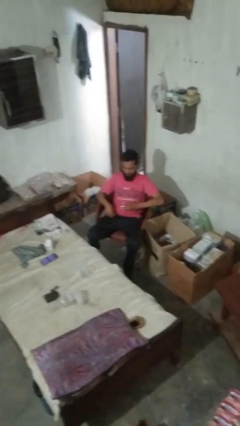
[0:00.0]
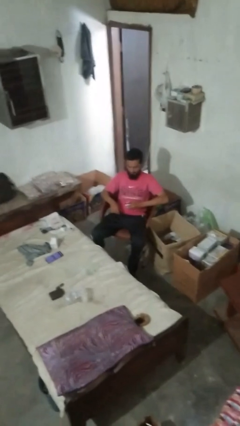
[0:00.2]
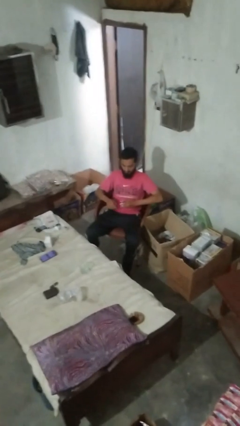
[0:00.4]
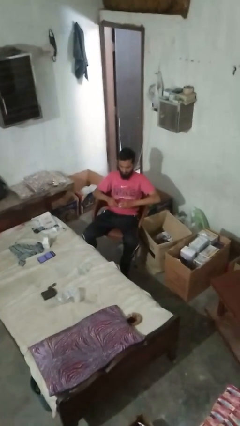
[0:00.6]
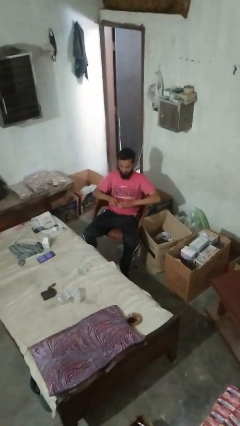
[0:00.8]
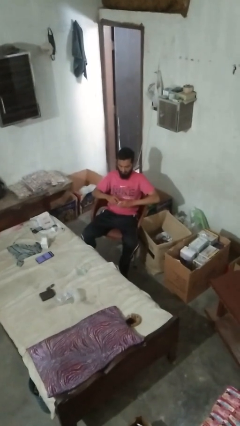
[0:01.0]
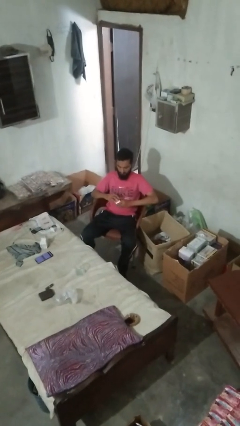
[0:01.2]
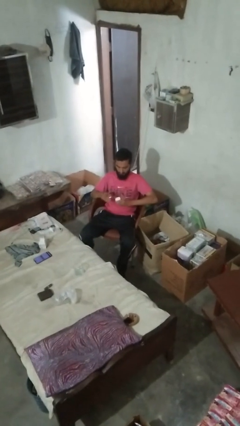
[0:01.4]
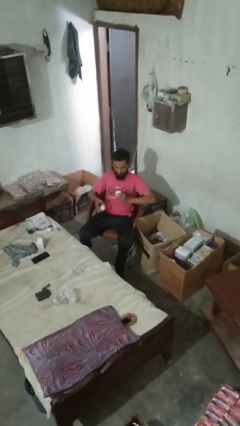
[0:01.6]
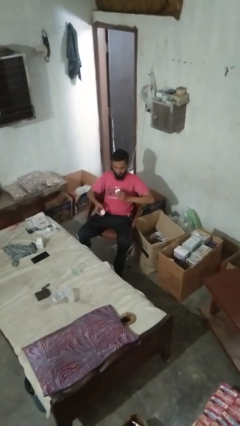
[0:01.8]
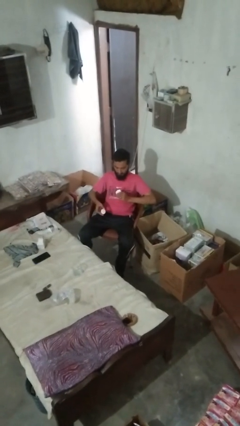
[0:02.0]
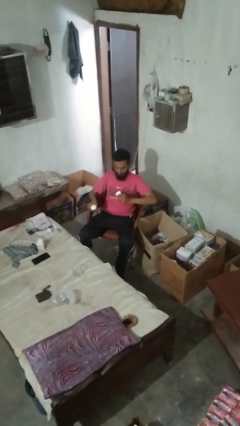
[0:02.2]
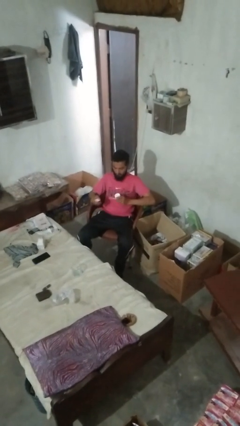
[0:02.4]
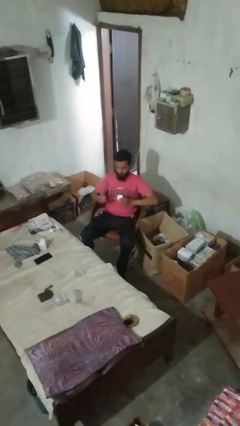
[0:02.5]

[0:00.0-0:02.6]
person opens jar

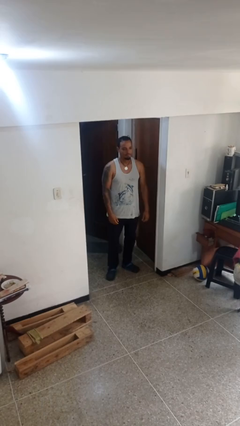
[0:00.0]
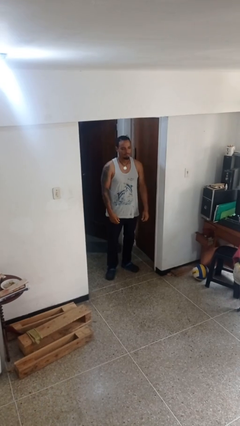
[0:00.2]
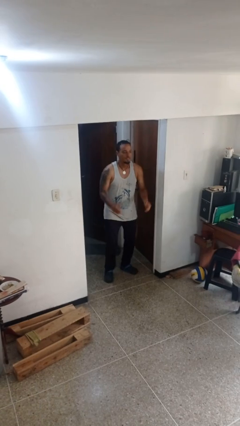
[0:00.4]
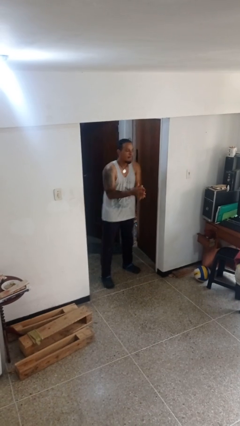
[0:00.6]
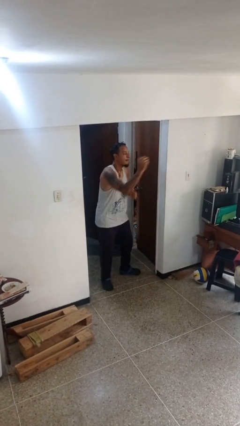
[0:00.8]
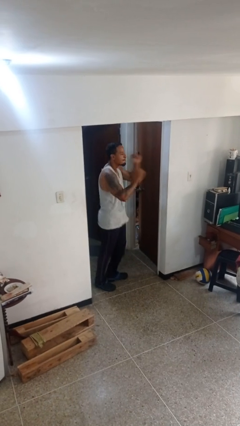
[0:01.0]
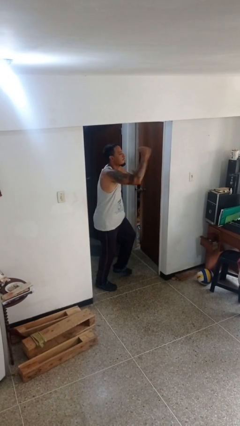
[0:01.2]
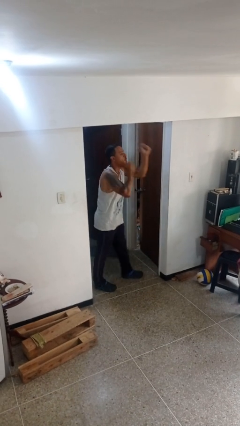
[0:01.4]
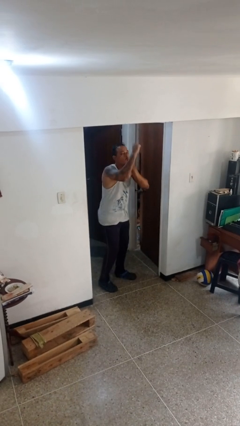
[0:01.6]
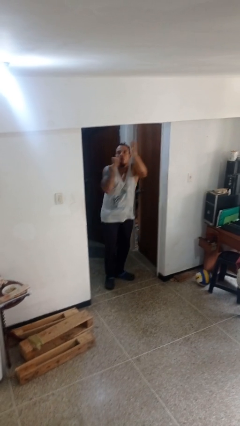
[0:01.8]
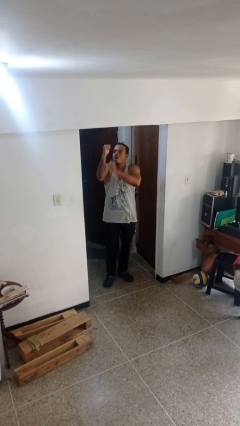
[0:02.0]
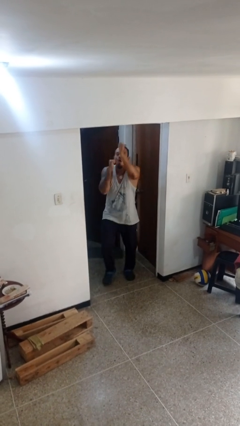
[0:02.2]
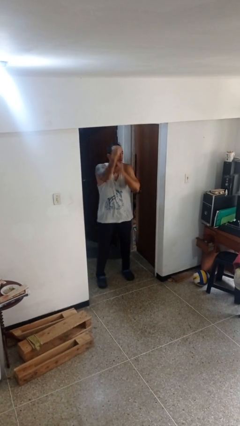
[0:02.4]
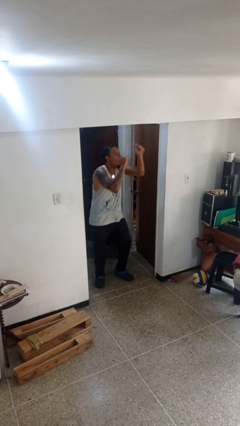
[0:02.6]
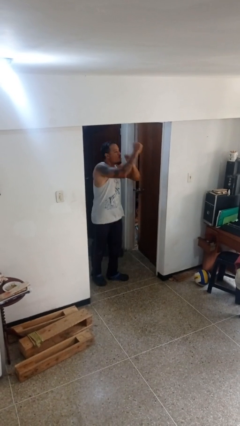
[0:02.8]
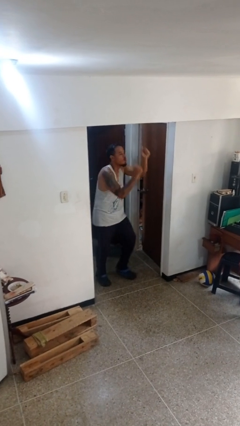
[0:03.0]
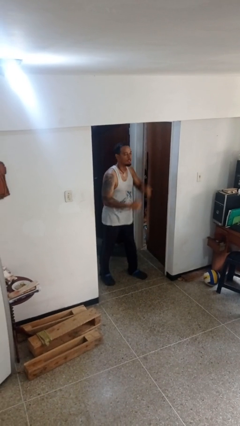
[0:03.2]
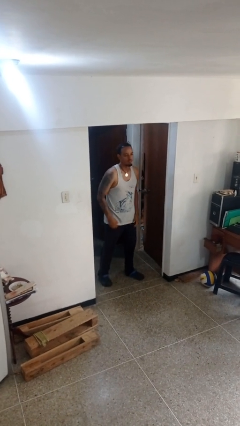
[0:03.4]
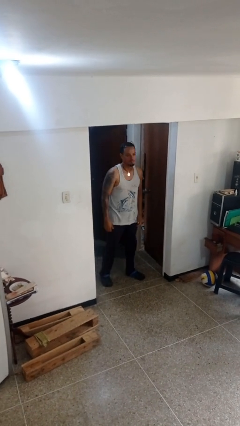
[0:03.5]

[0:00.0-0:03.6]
person dances in place

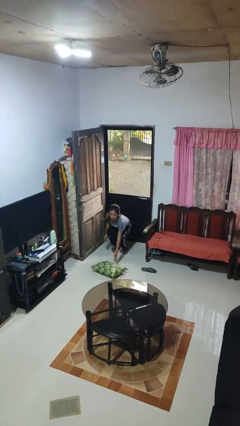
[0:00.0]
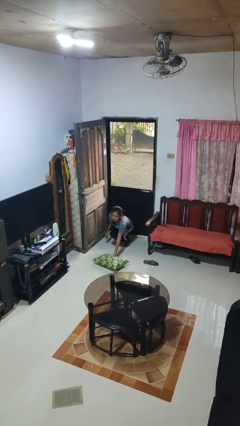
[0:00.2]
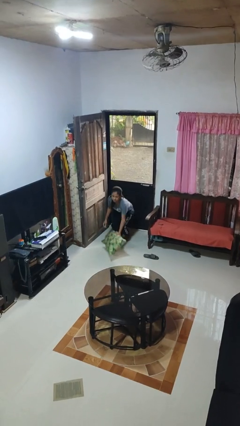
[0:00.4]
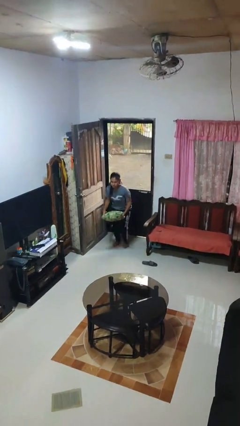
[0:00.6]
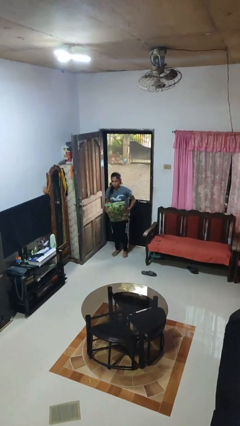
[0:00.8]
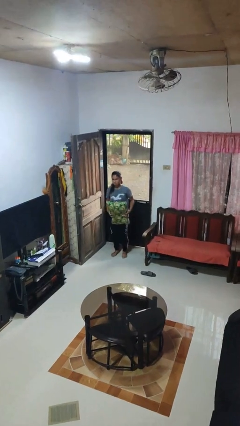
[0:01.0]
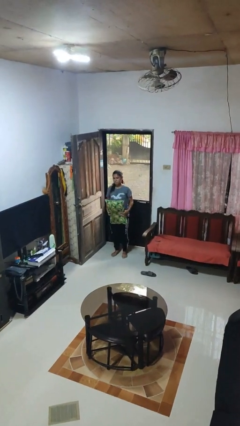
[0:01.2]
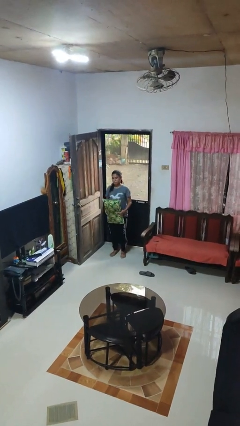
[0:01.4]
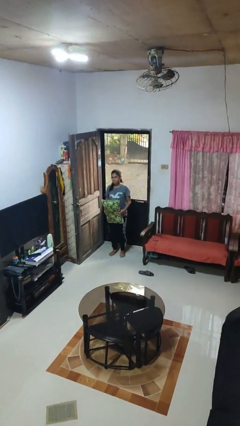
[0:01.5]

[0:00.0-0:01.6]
person picks up object from floor

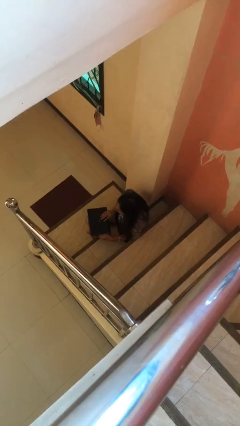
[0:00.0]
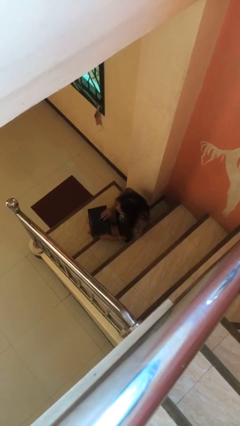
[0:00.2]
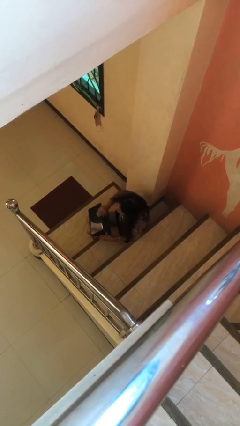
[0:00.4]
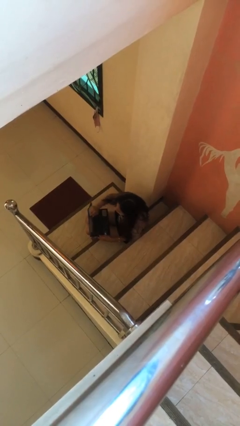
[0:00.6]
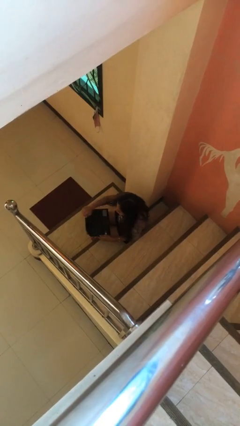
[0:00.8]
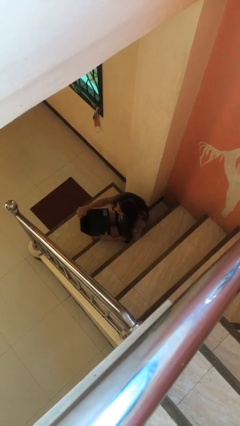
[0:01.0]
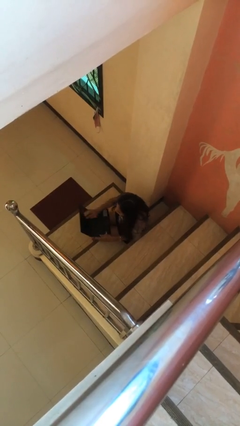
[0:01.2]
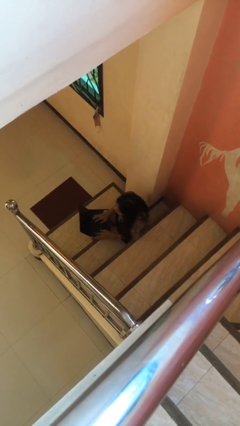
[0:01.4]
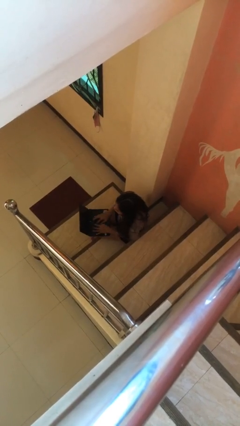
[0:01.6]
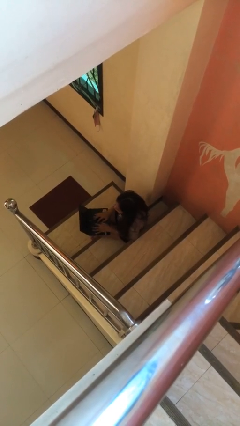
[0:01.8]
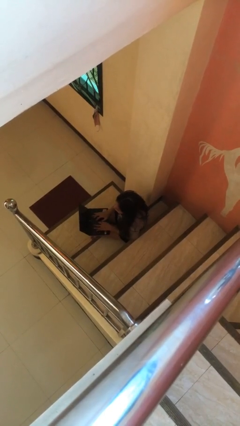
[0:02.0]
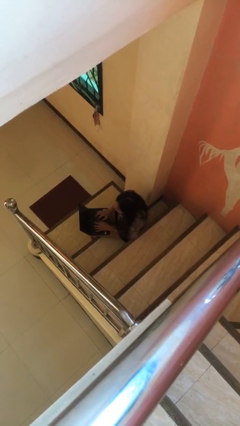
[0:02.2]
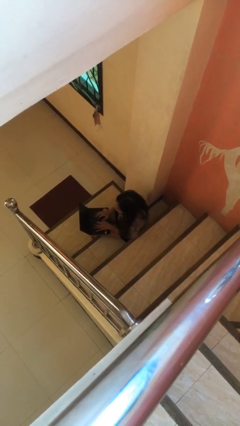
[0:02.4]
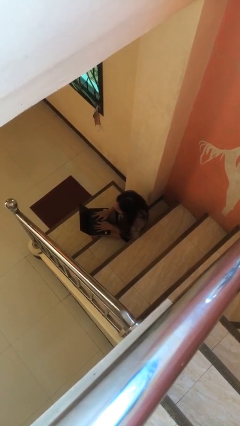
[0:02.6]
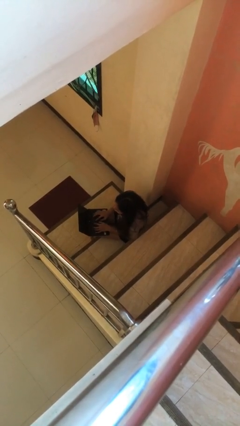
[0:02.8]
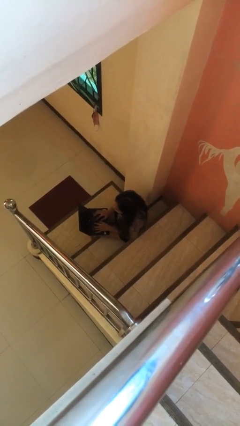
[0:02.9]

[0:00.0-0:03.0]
person interacts with laptop

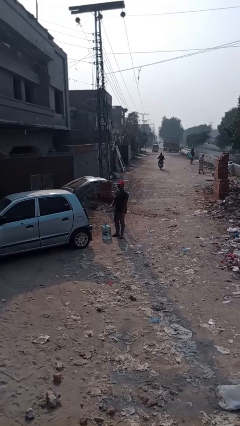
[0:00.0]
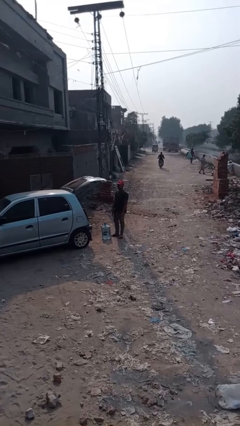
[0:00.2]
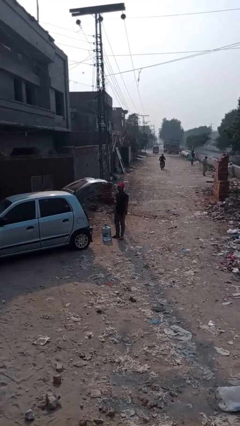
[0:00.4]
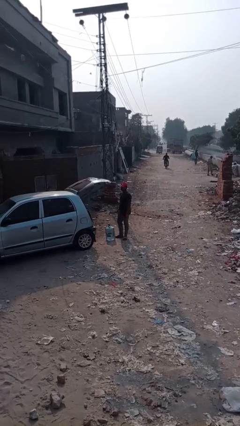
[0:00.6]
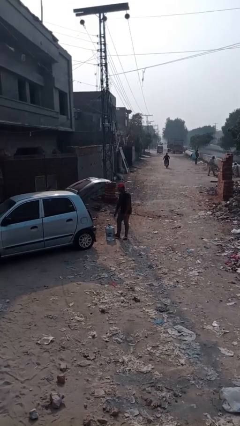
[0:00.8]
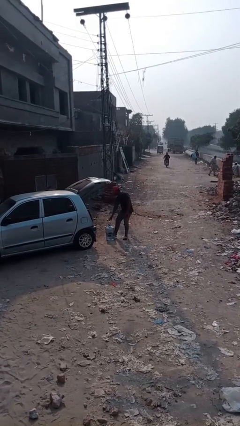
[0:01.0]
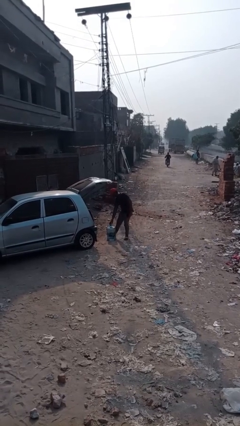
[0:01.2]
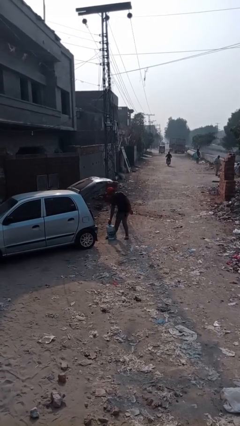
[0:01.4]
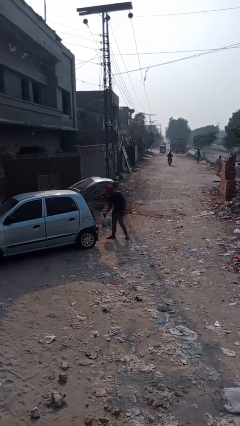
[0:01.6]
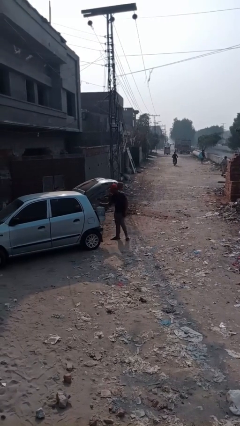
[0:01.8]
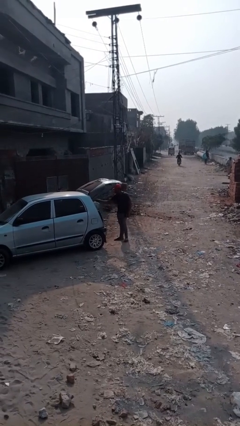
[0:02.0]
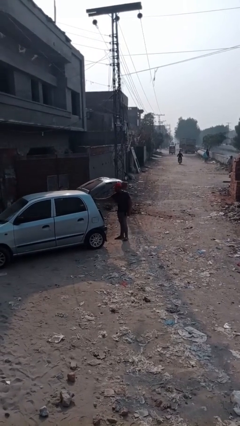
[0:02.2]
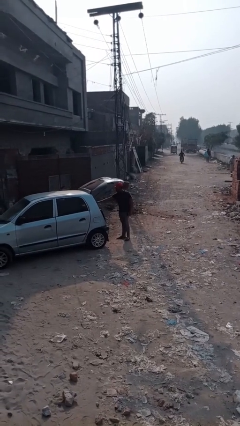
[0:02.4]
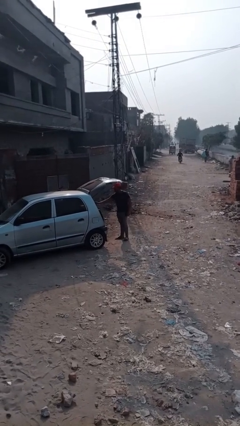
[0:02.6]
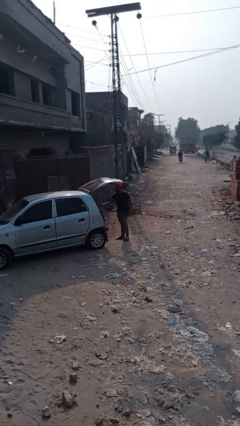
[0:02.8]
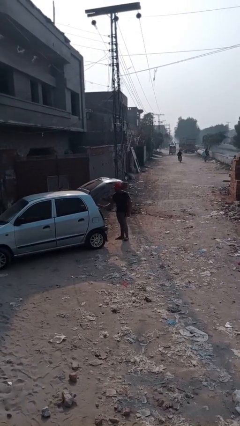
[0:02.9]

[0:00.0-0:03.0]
person loads car

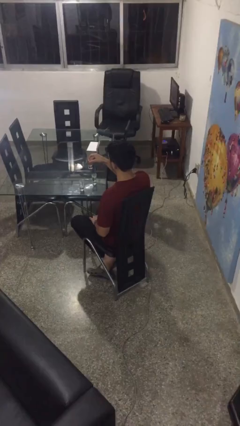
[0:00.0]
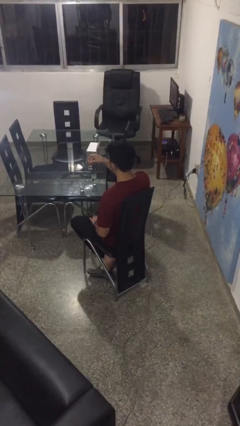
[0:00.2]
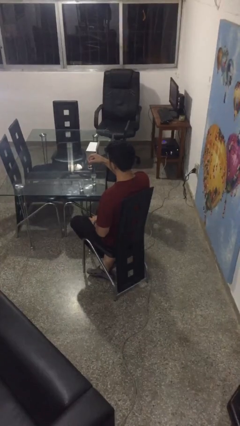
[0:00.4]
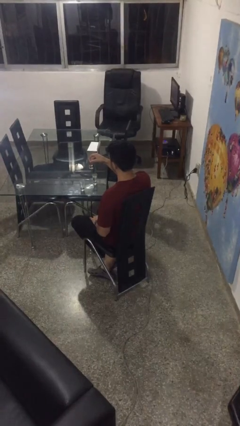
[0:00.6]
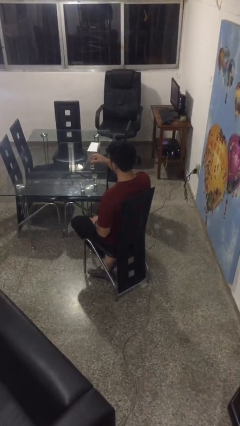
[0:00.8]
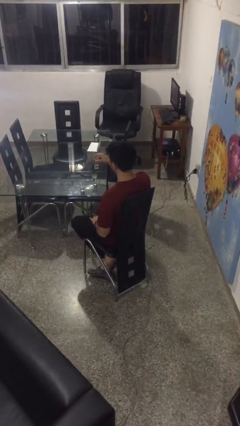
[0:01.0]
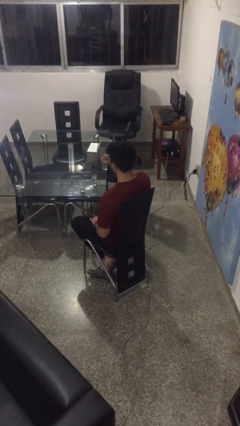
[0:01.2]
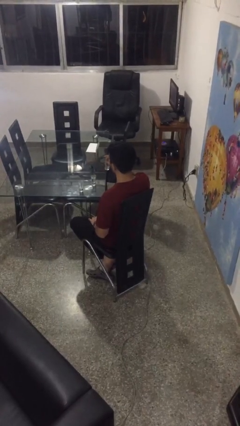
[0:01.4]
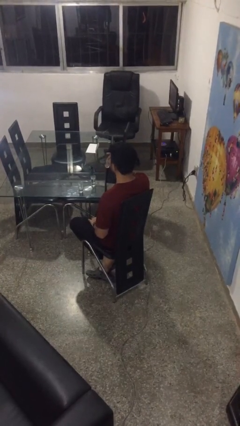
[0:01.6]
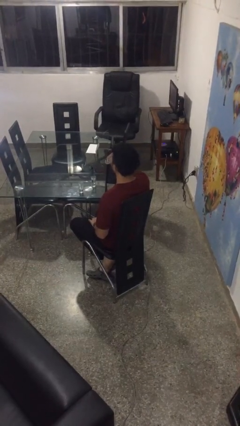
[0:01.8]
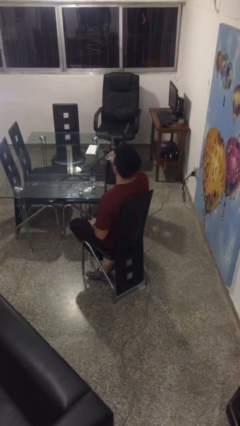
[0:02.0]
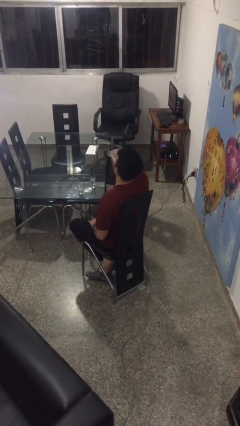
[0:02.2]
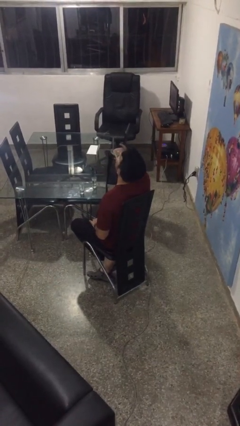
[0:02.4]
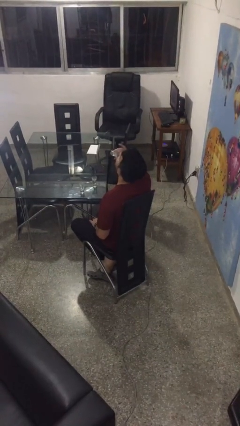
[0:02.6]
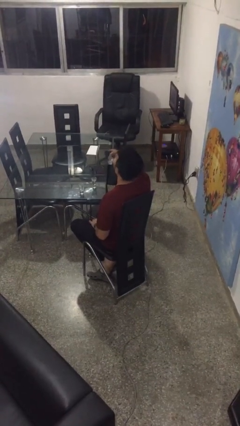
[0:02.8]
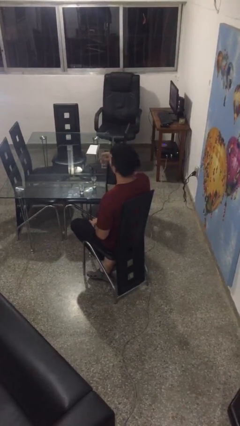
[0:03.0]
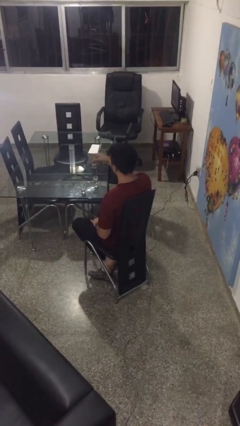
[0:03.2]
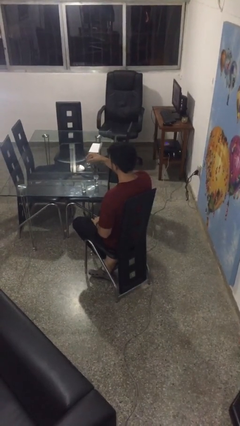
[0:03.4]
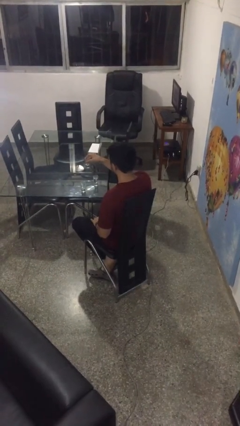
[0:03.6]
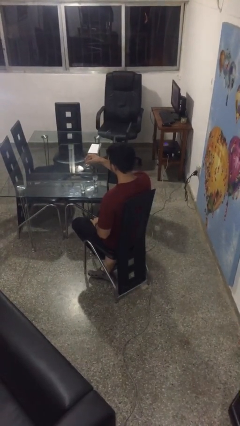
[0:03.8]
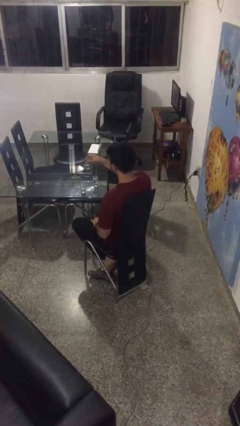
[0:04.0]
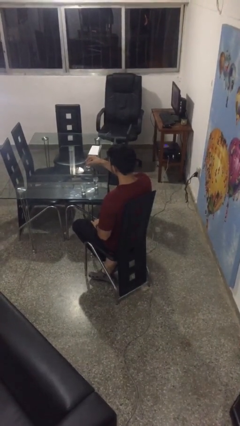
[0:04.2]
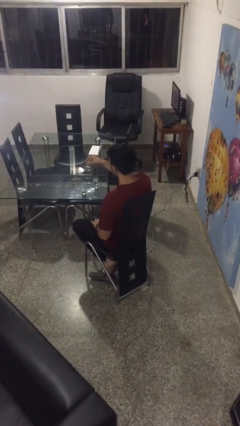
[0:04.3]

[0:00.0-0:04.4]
person drinks from shotglass
